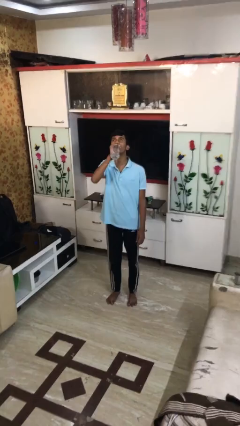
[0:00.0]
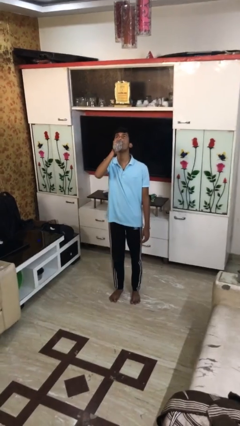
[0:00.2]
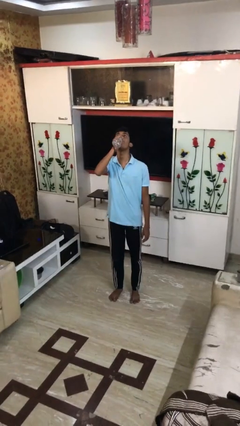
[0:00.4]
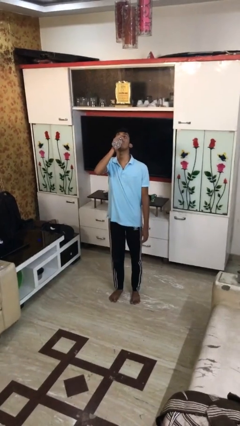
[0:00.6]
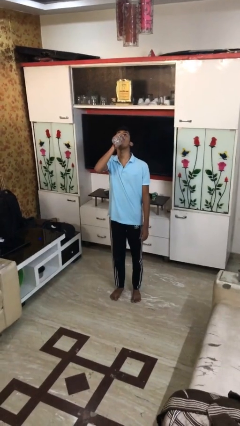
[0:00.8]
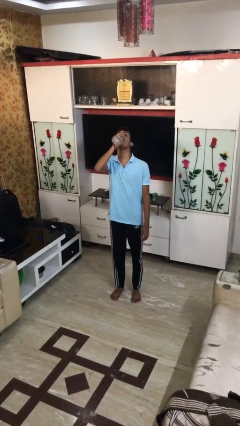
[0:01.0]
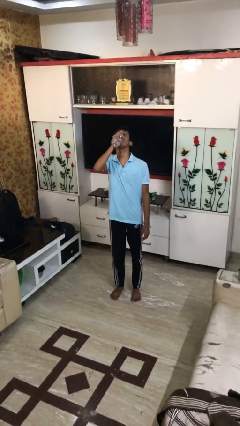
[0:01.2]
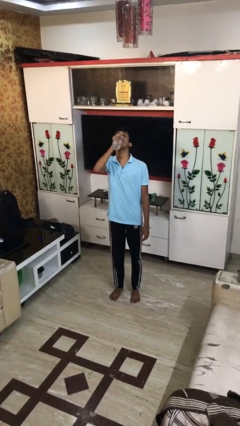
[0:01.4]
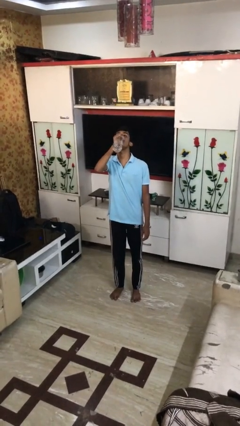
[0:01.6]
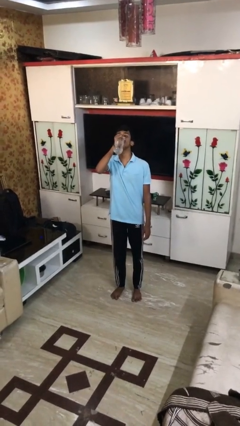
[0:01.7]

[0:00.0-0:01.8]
person drinks from bottle

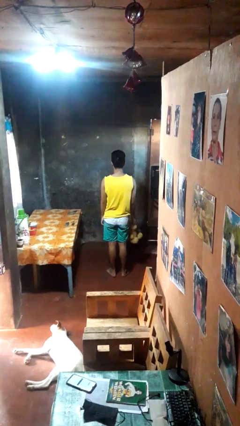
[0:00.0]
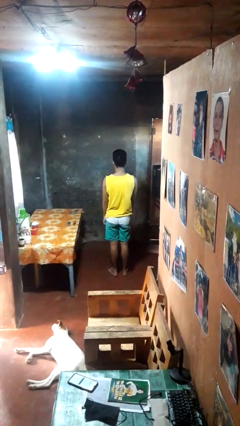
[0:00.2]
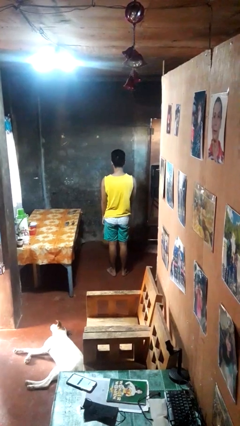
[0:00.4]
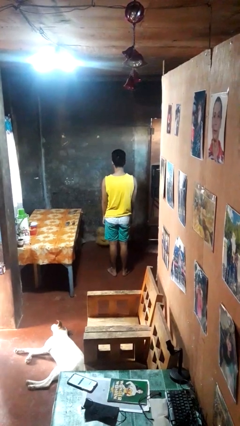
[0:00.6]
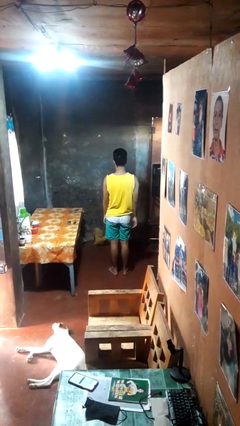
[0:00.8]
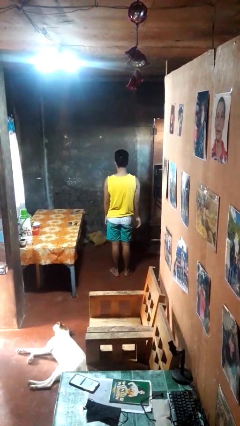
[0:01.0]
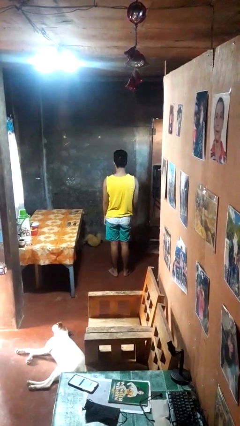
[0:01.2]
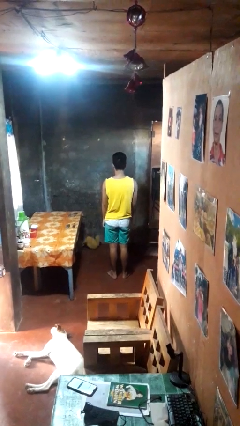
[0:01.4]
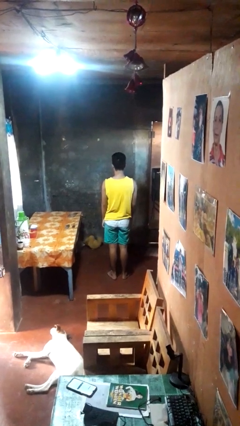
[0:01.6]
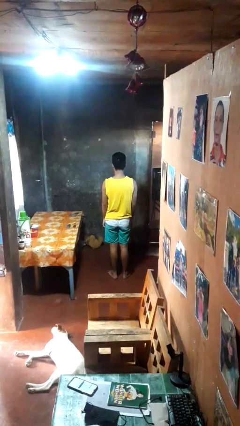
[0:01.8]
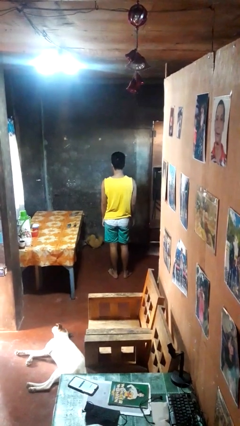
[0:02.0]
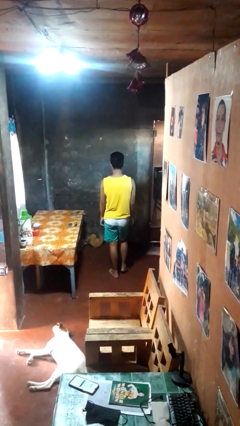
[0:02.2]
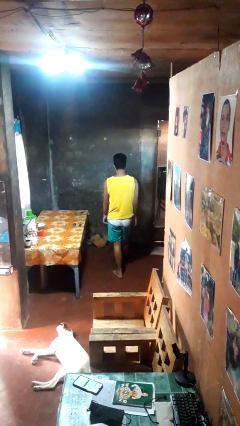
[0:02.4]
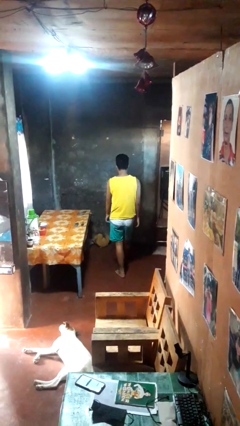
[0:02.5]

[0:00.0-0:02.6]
person throws object to ground

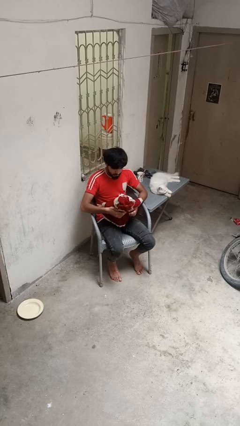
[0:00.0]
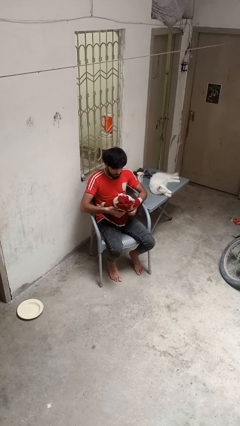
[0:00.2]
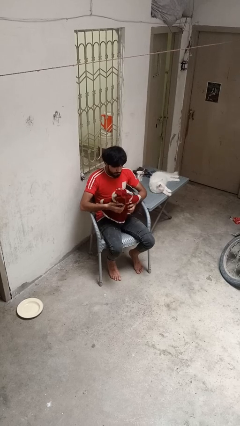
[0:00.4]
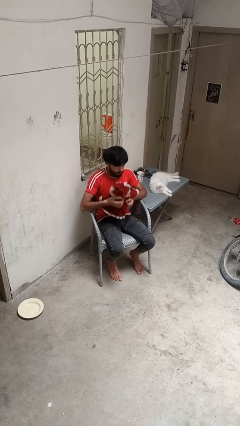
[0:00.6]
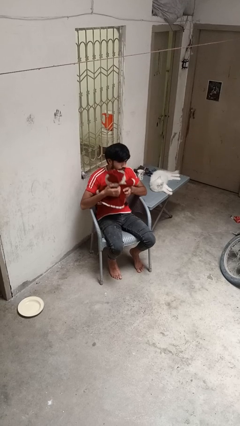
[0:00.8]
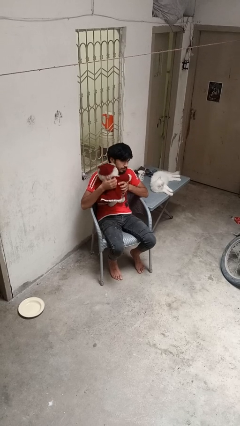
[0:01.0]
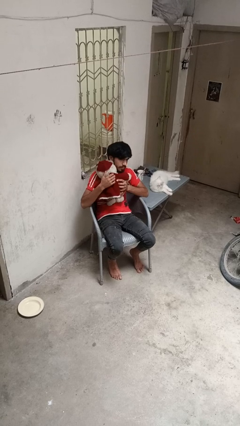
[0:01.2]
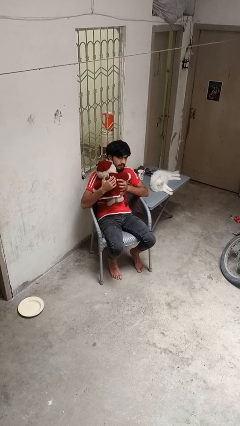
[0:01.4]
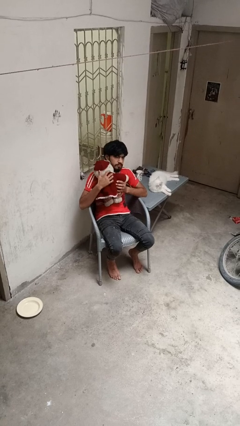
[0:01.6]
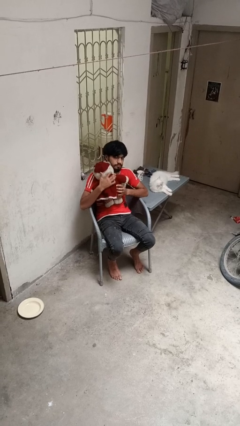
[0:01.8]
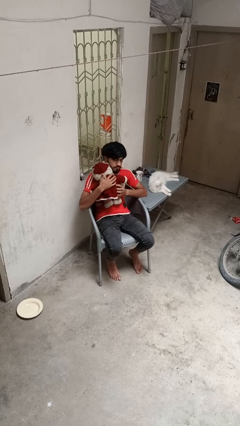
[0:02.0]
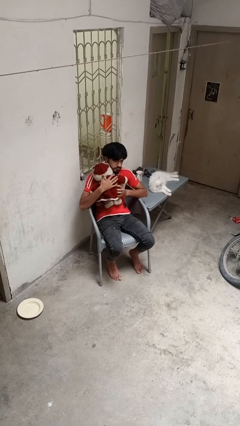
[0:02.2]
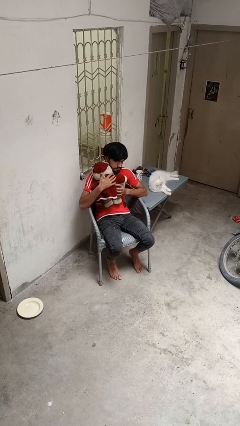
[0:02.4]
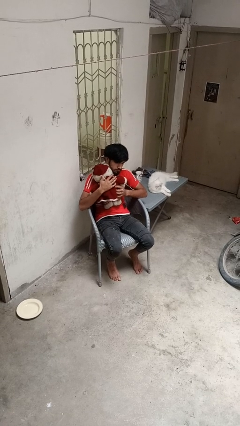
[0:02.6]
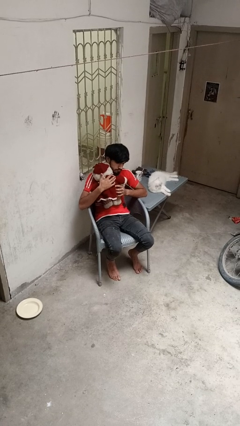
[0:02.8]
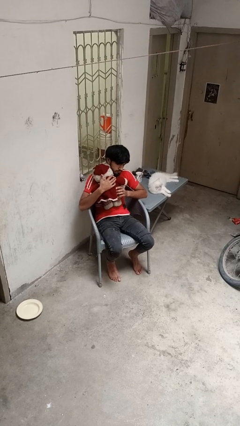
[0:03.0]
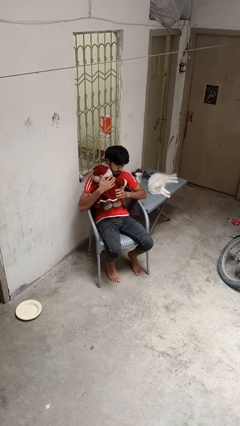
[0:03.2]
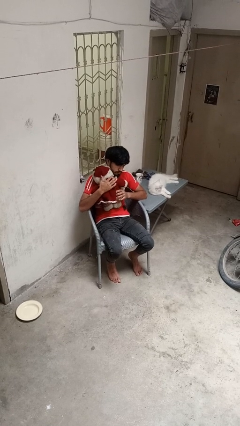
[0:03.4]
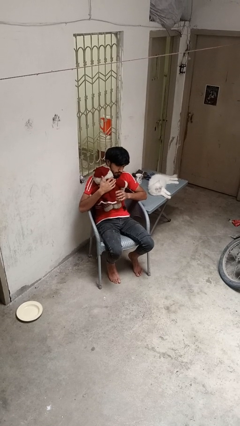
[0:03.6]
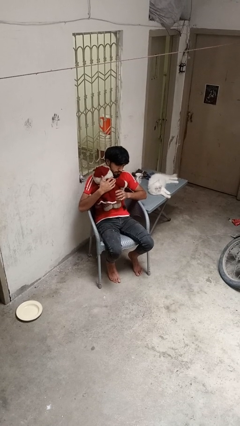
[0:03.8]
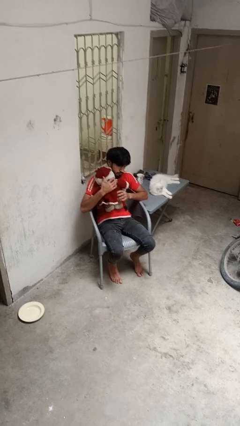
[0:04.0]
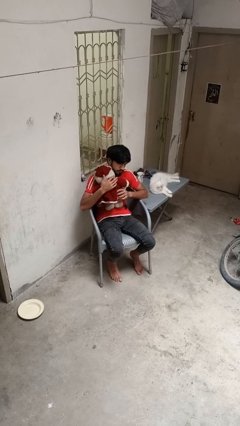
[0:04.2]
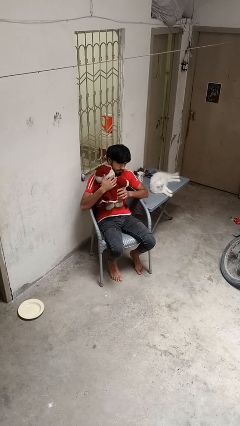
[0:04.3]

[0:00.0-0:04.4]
person hugs stuffed animal

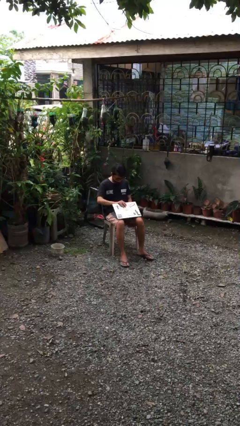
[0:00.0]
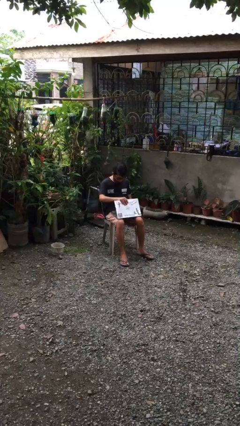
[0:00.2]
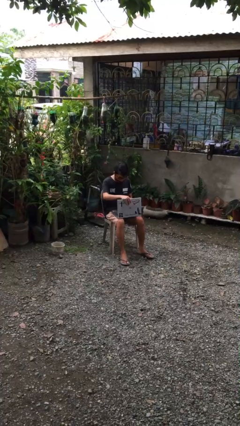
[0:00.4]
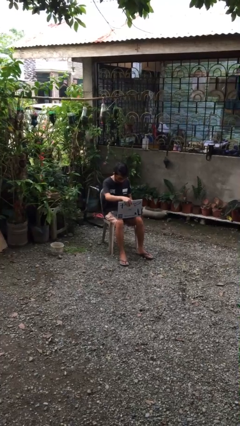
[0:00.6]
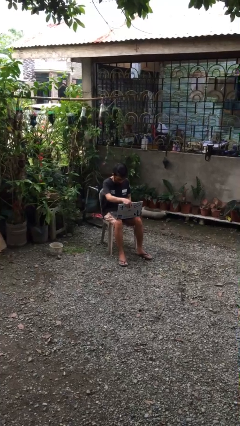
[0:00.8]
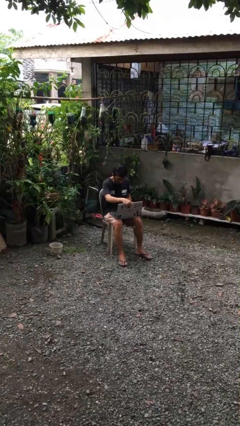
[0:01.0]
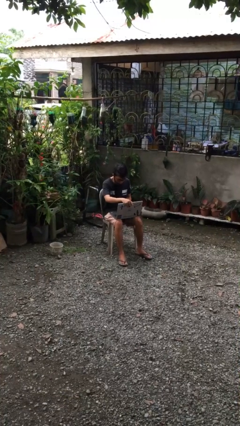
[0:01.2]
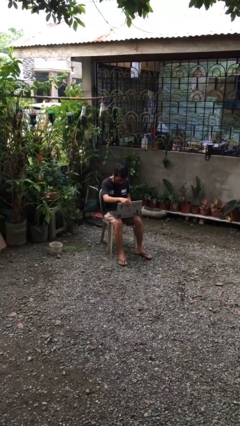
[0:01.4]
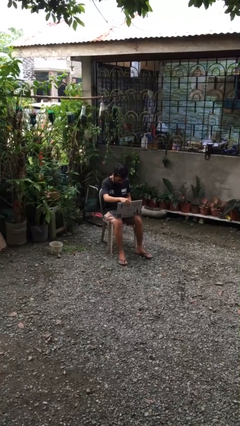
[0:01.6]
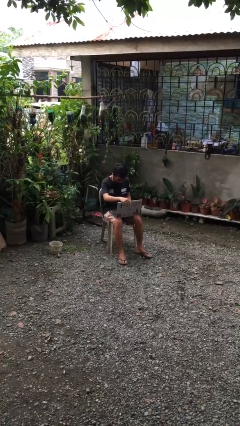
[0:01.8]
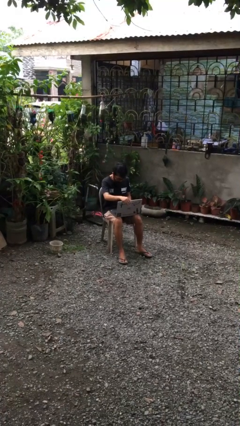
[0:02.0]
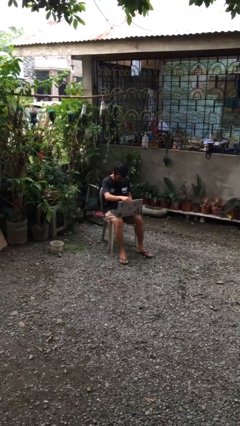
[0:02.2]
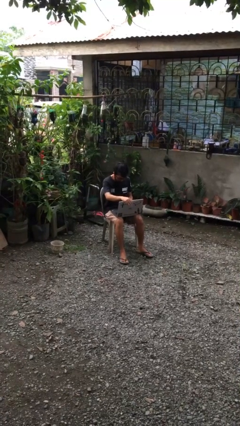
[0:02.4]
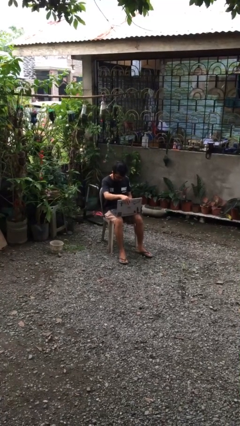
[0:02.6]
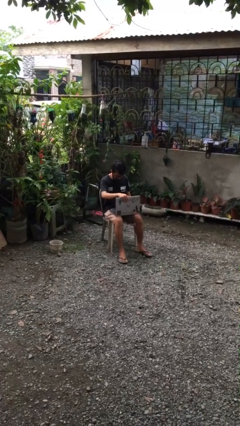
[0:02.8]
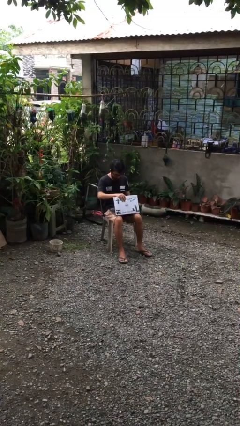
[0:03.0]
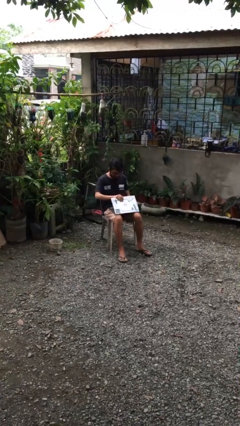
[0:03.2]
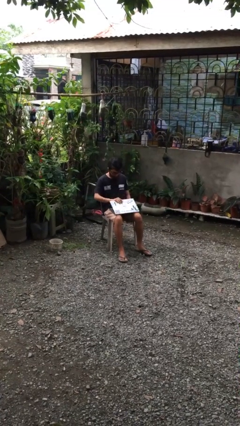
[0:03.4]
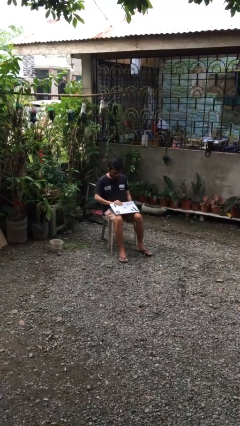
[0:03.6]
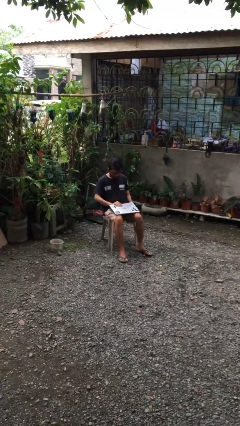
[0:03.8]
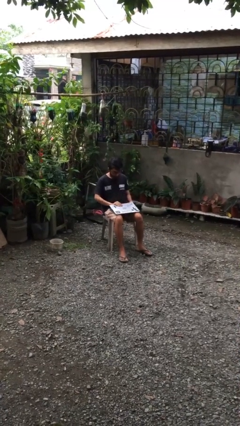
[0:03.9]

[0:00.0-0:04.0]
person interacts with laptop

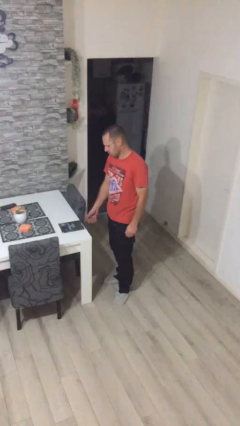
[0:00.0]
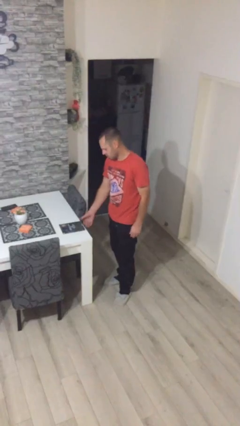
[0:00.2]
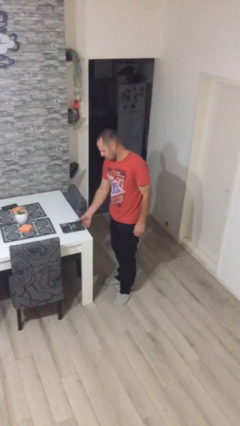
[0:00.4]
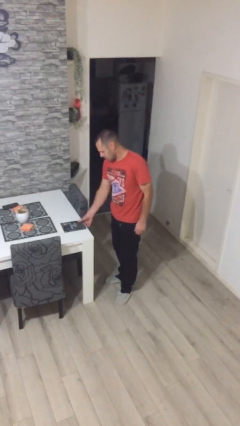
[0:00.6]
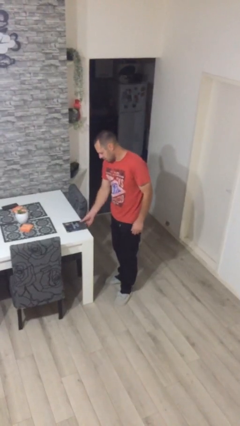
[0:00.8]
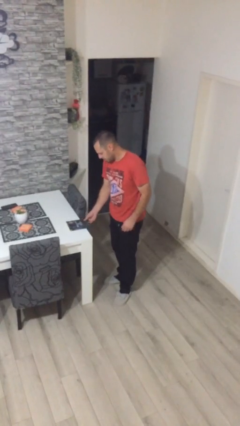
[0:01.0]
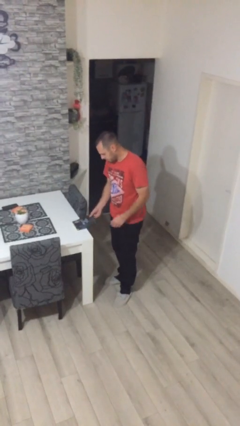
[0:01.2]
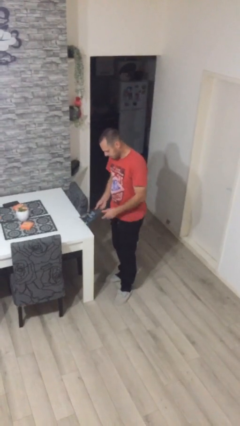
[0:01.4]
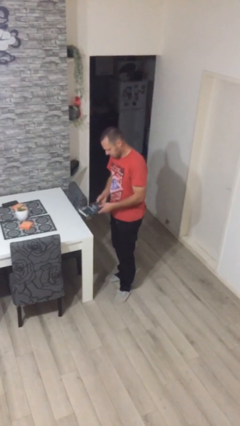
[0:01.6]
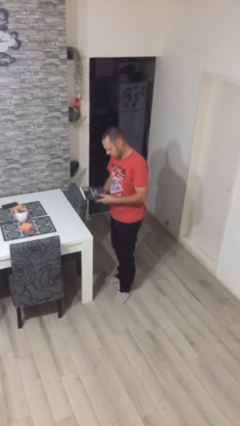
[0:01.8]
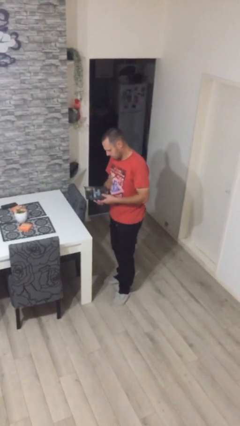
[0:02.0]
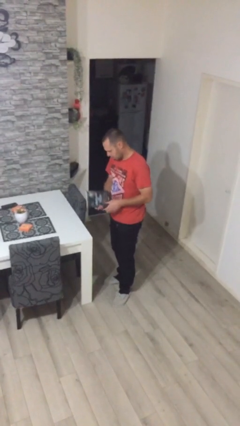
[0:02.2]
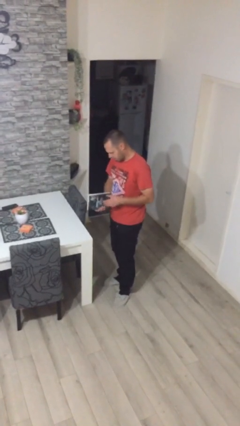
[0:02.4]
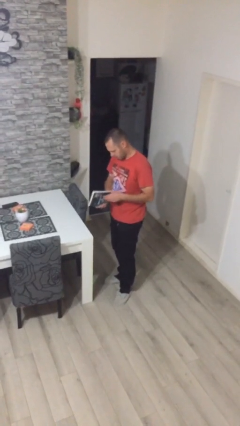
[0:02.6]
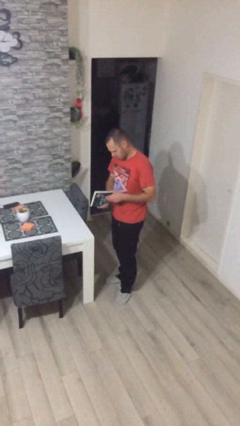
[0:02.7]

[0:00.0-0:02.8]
person picks up object from table

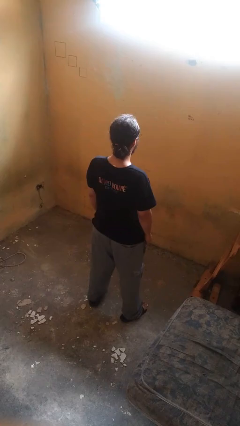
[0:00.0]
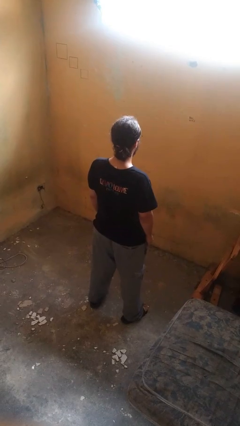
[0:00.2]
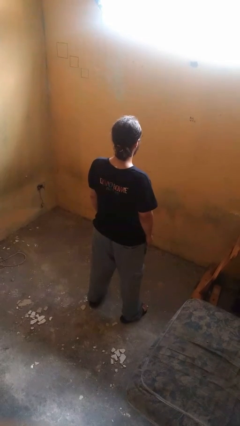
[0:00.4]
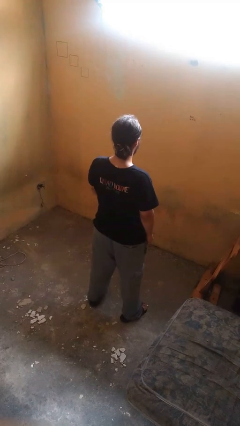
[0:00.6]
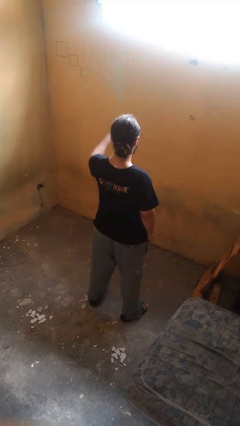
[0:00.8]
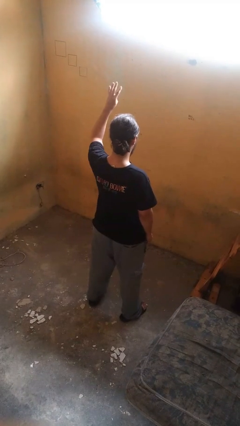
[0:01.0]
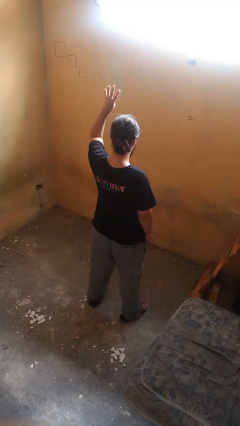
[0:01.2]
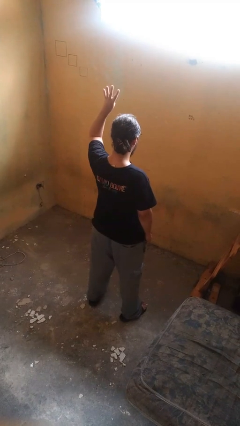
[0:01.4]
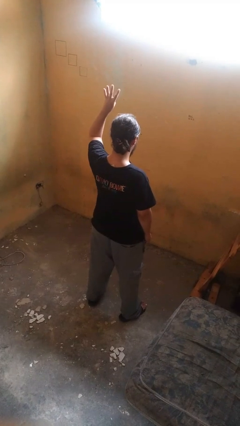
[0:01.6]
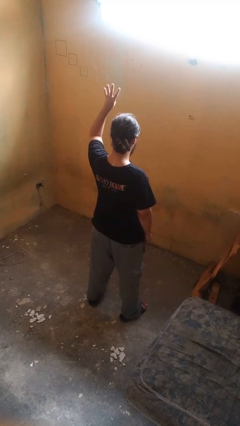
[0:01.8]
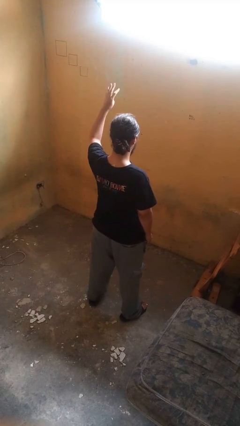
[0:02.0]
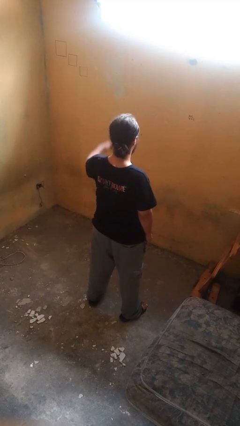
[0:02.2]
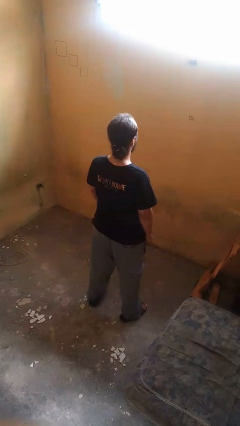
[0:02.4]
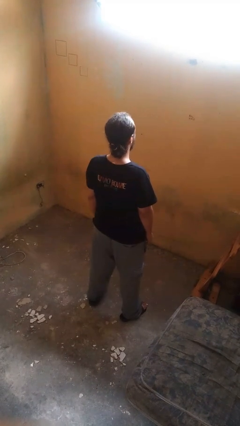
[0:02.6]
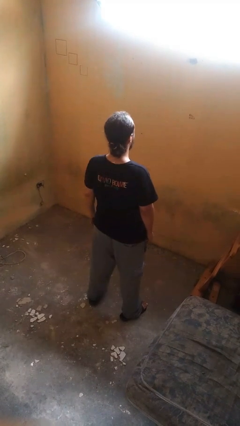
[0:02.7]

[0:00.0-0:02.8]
person gestures number four
